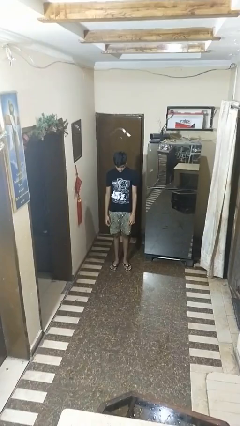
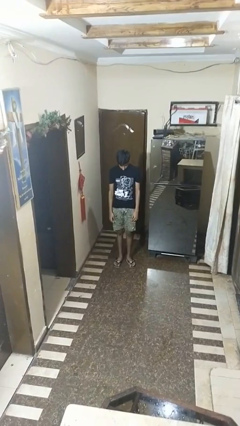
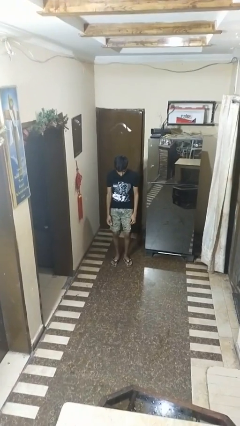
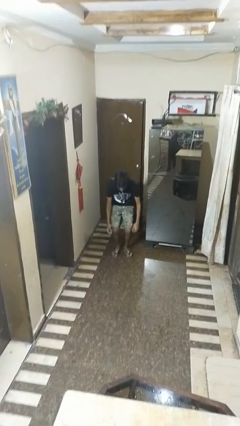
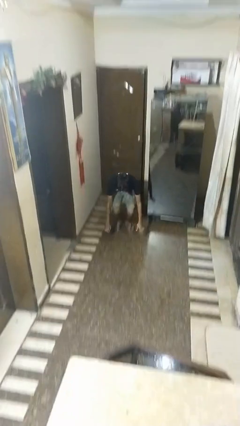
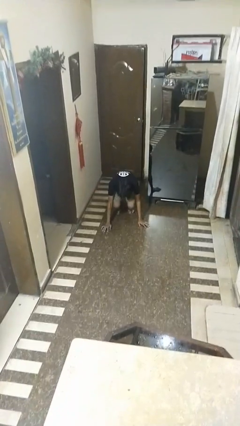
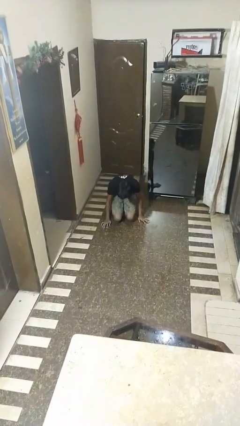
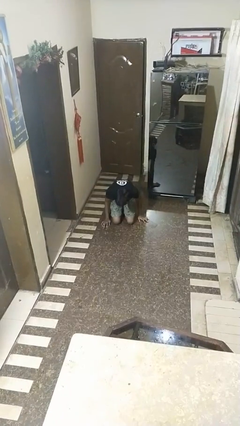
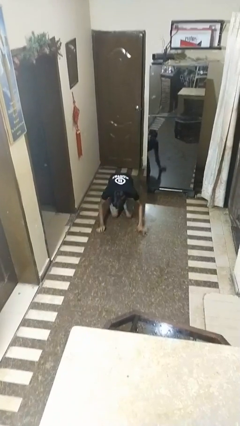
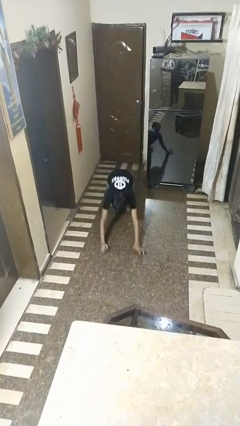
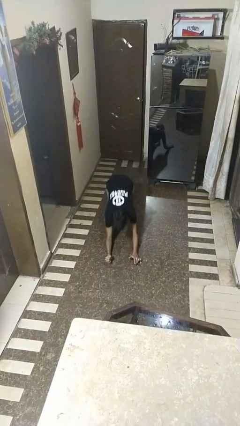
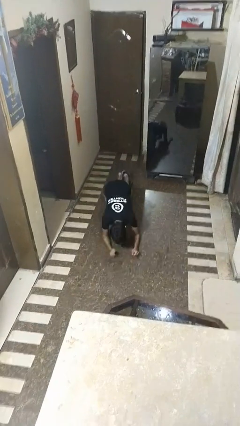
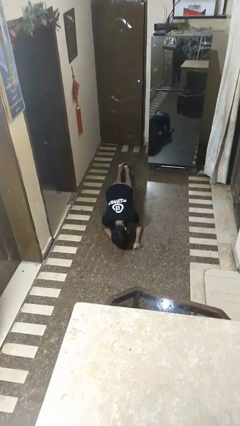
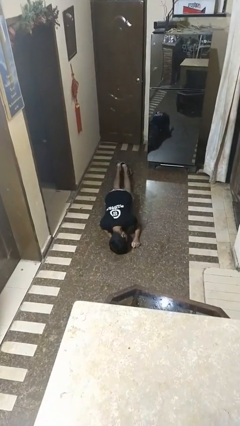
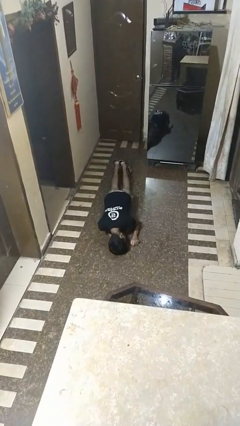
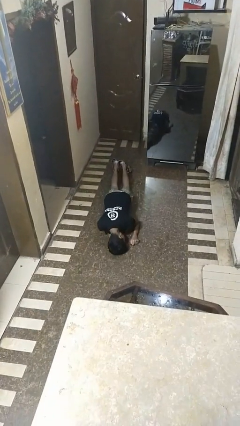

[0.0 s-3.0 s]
person falls while standing

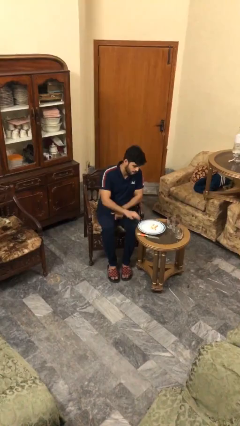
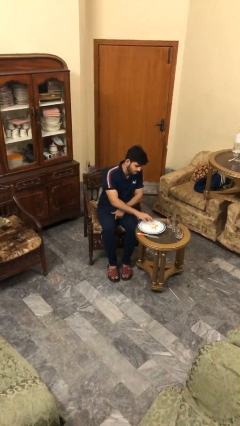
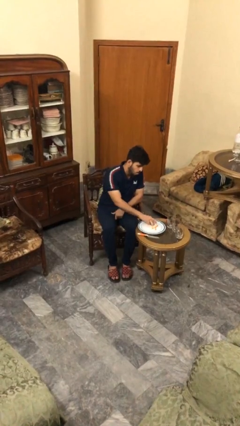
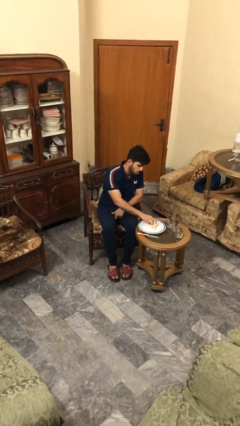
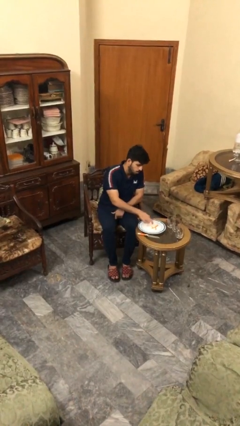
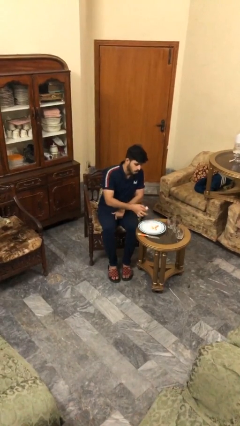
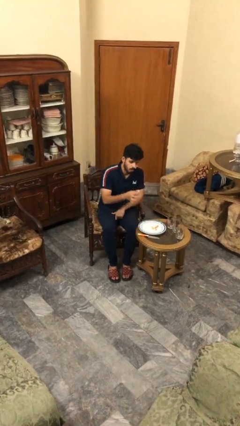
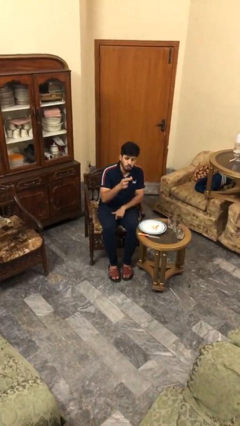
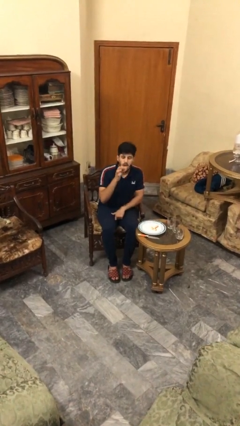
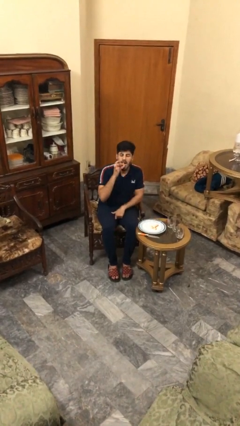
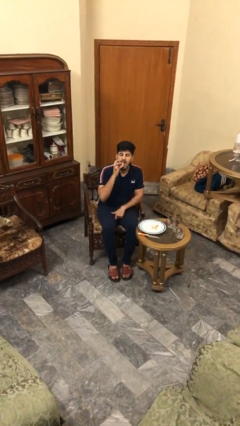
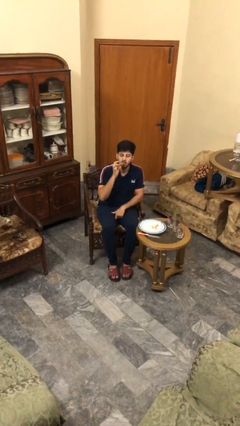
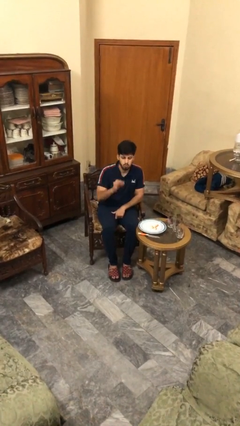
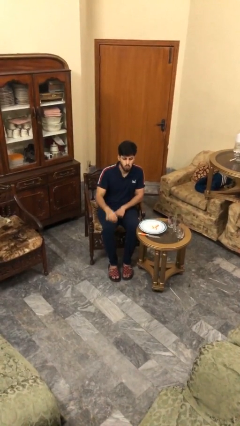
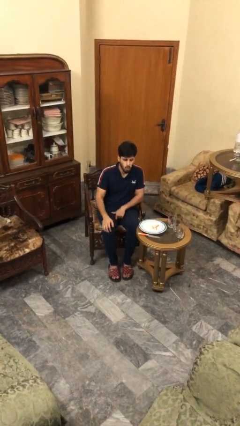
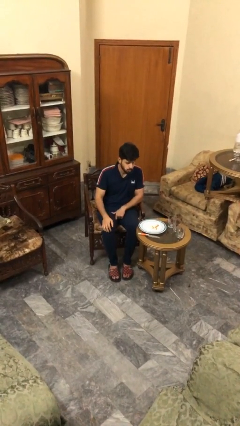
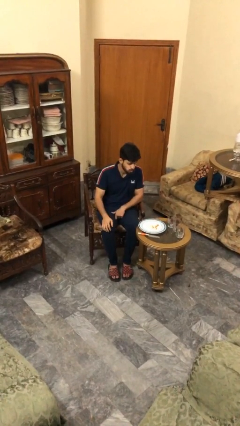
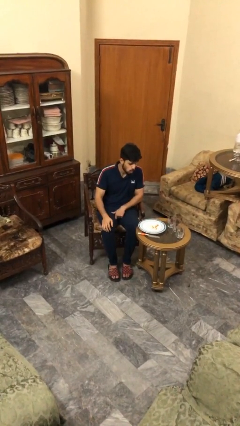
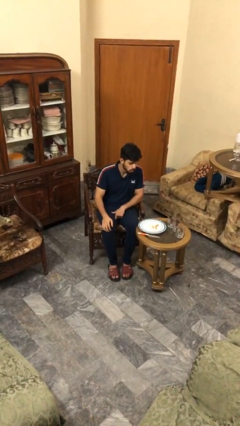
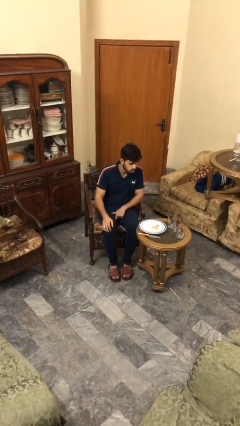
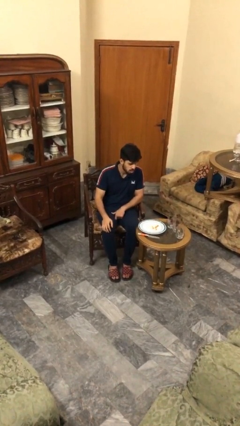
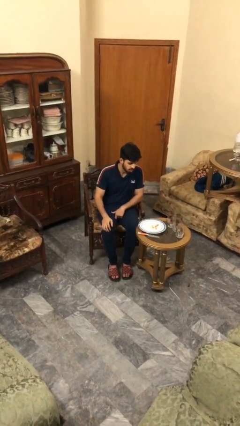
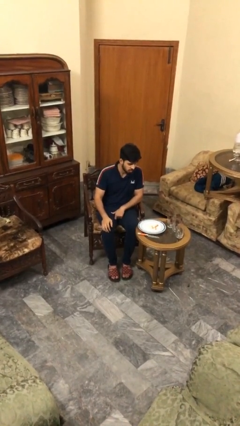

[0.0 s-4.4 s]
person eats with hands

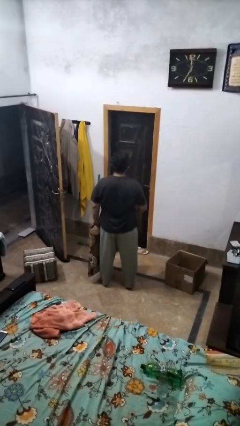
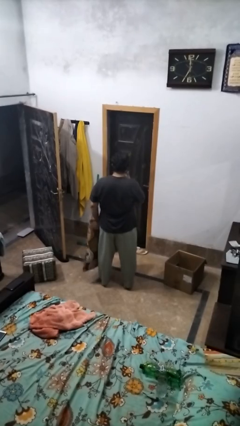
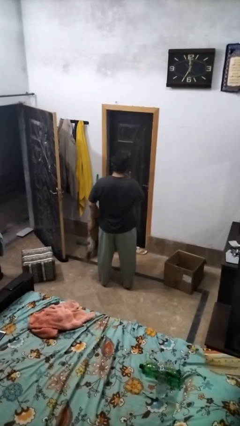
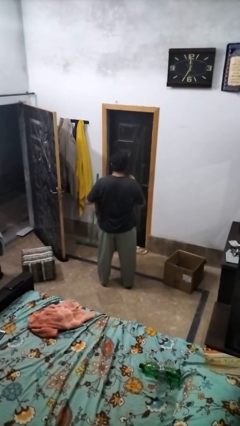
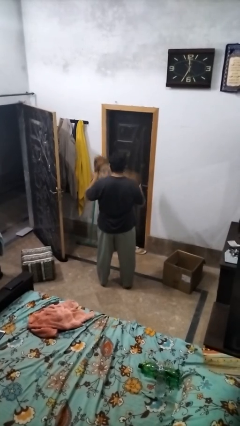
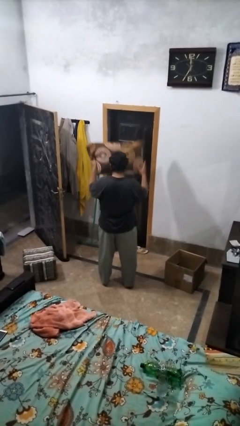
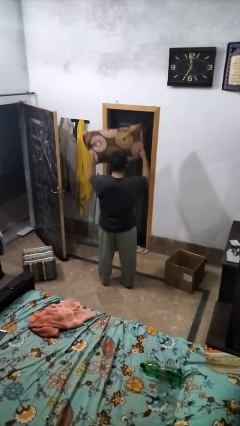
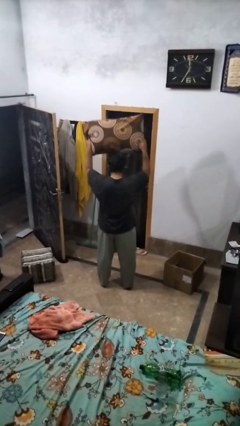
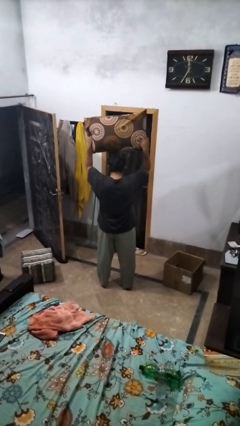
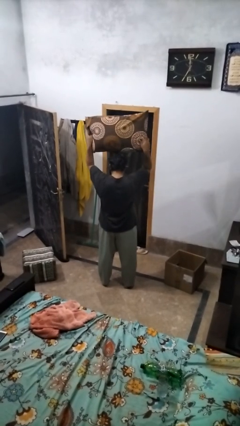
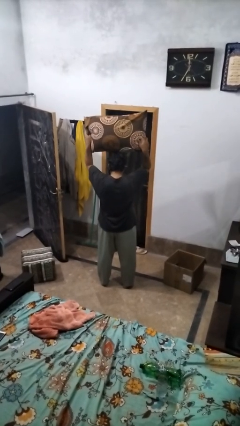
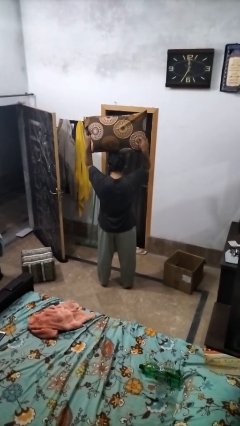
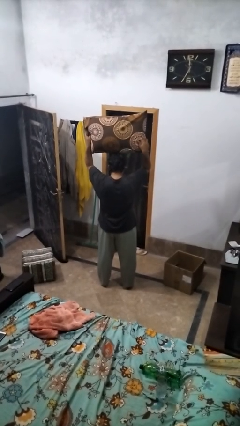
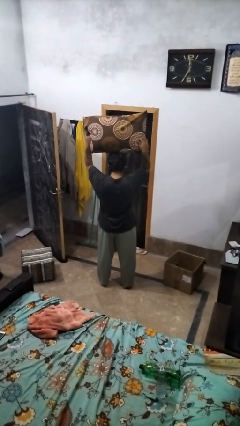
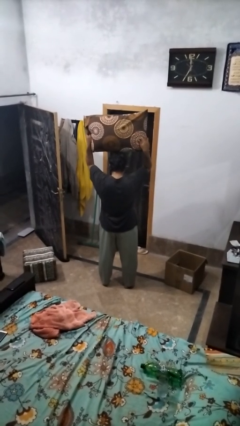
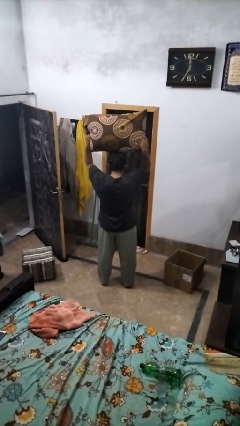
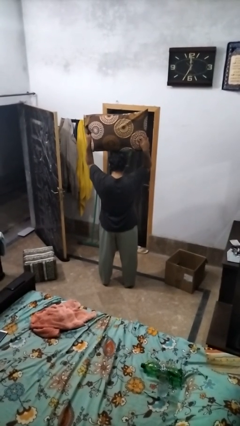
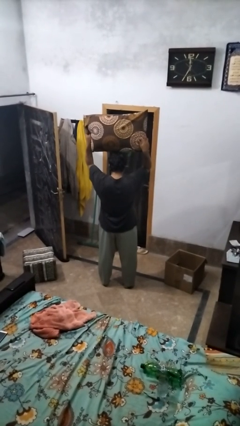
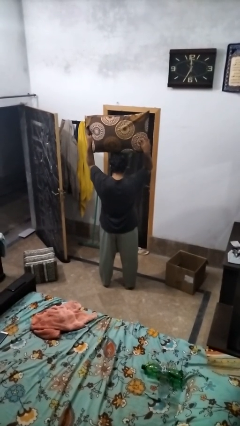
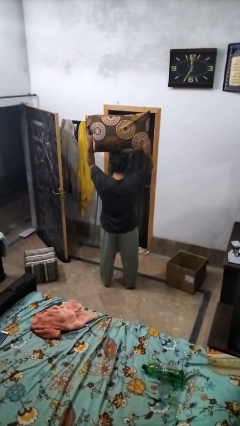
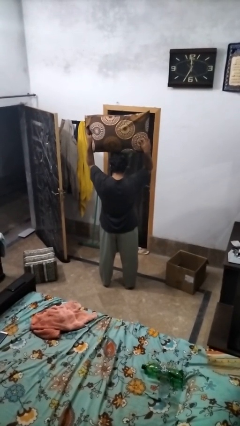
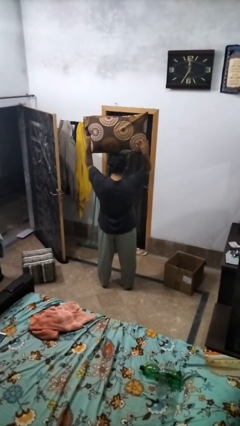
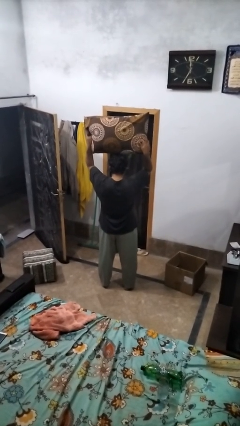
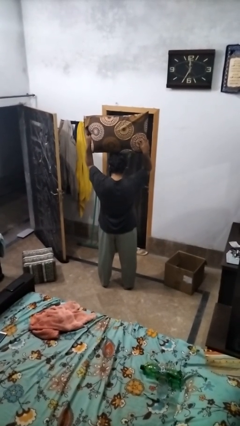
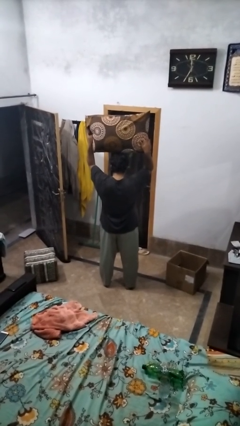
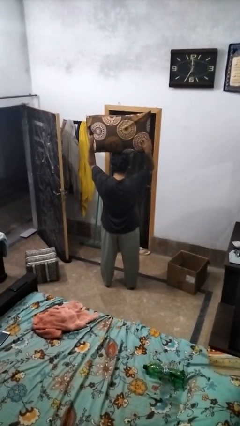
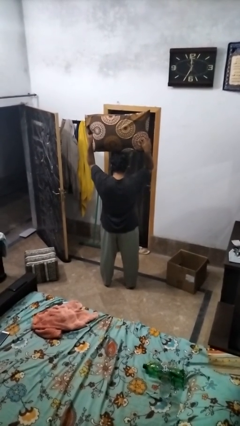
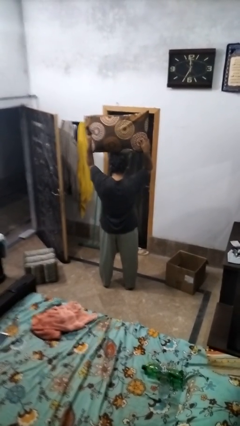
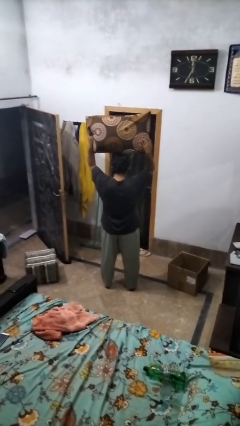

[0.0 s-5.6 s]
person holds object above head

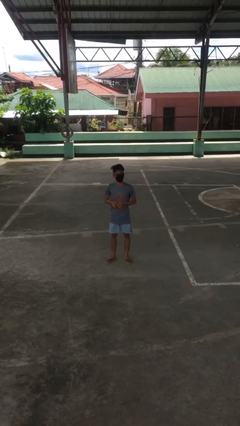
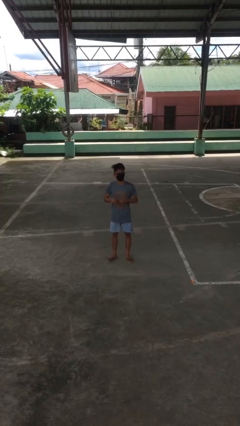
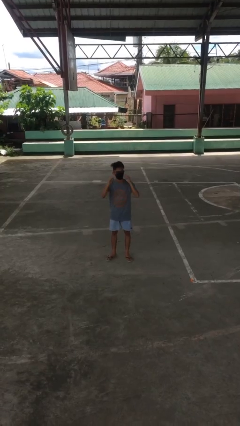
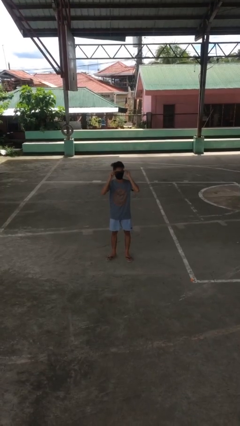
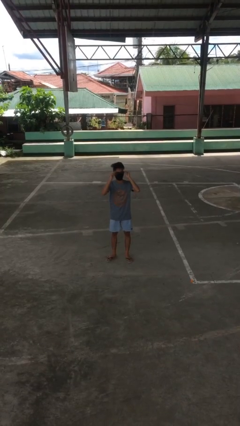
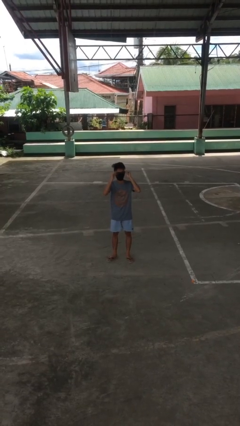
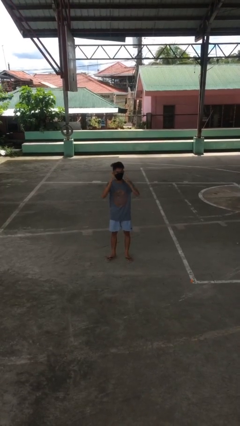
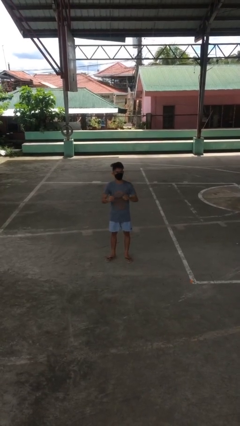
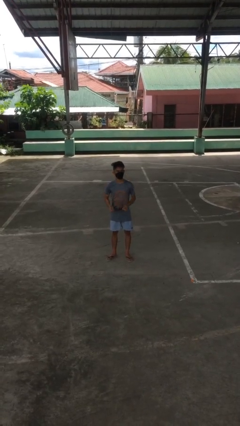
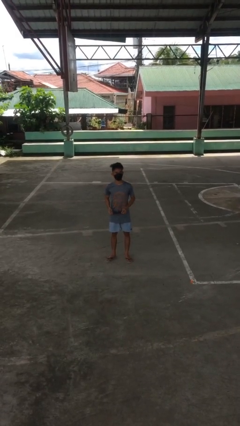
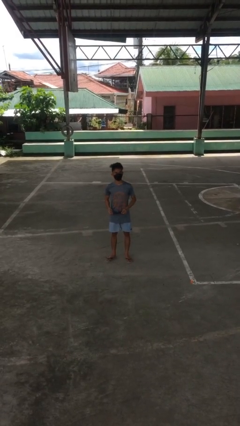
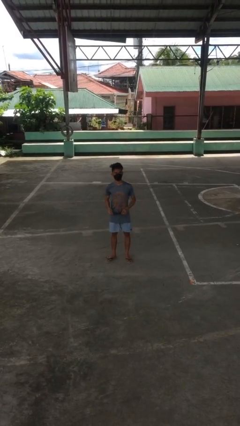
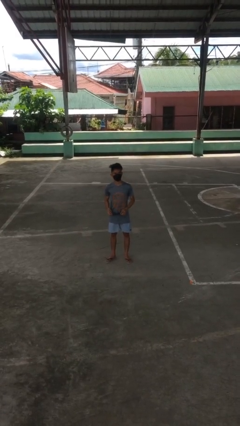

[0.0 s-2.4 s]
person takes off glasses

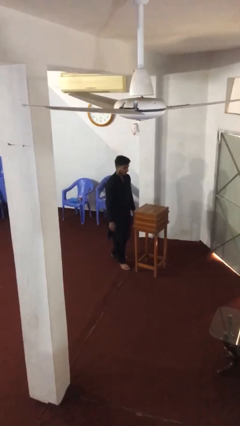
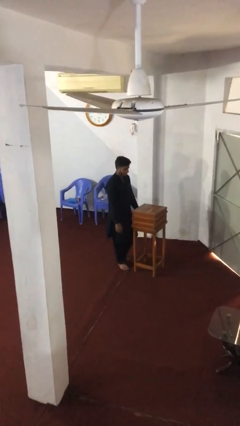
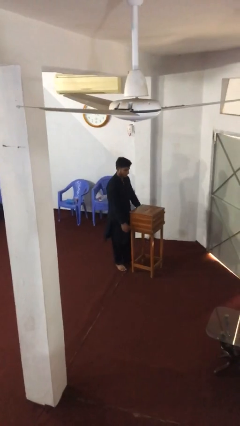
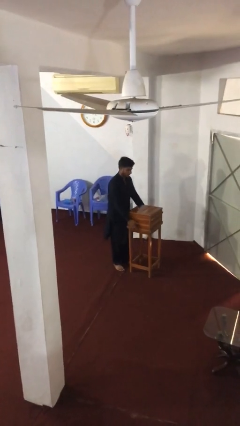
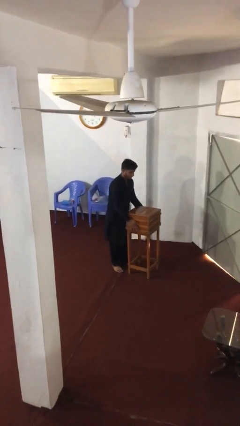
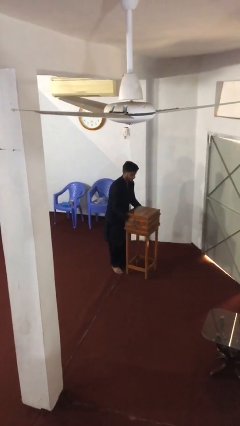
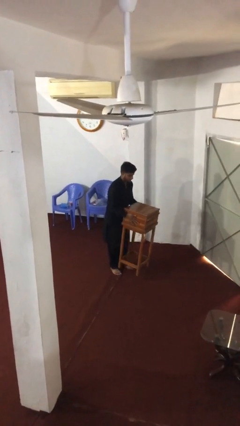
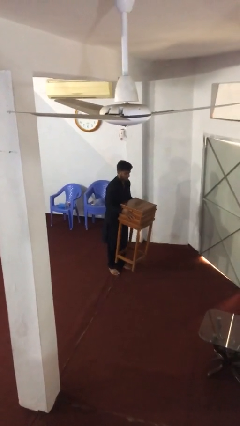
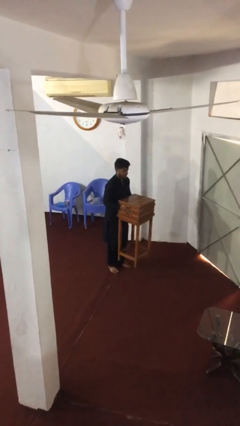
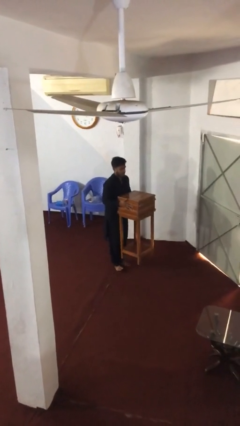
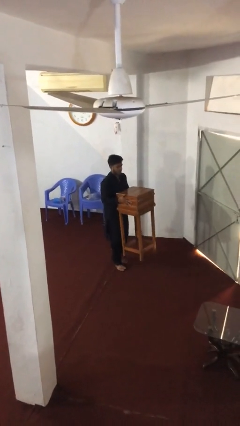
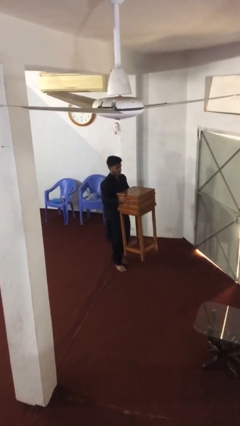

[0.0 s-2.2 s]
person picks up object from floor

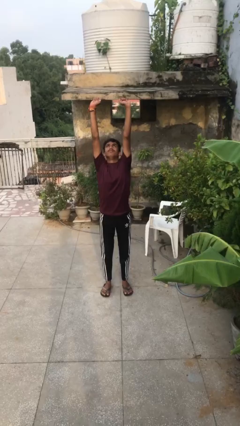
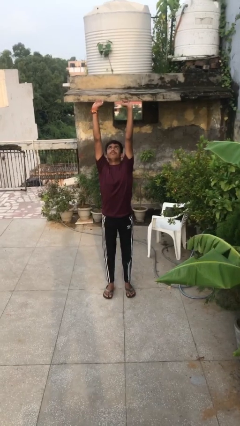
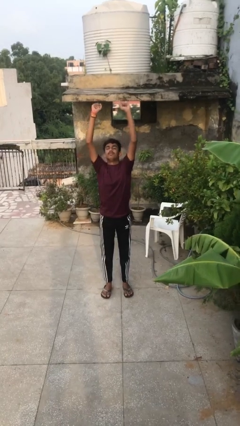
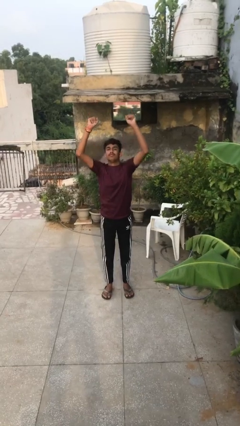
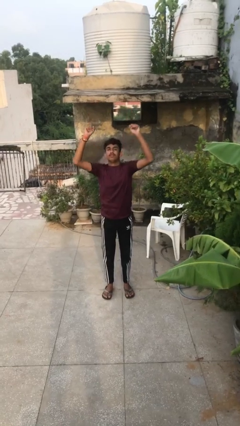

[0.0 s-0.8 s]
person stretches arms over head
